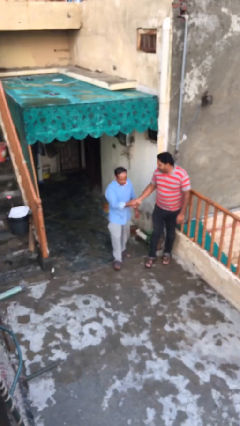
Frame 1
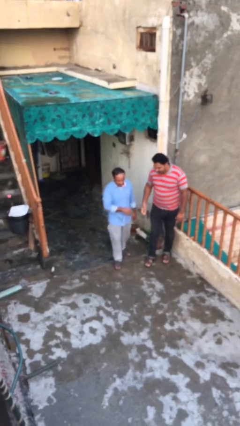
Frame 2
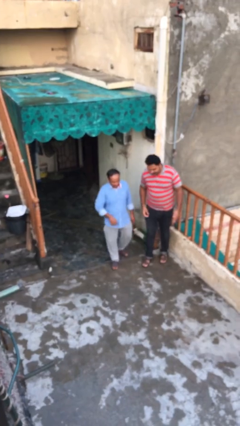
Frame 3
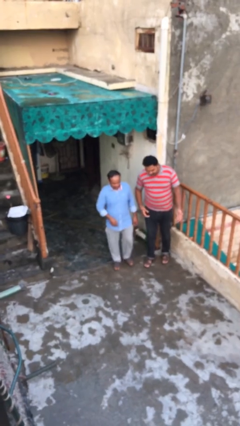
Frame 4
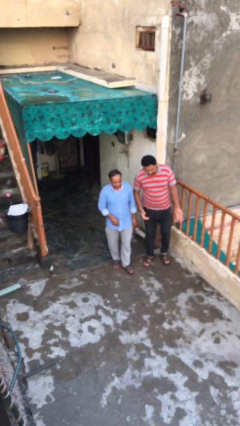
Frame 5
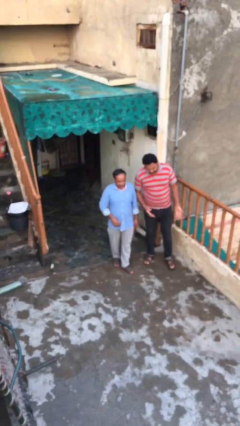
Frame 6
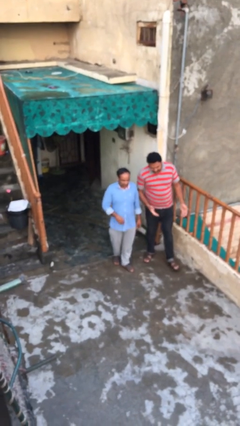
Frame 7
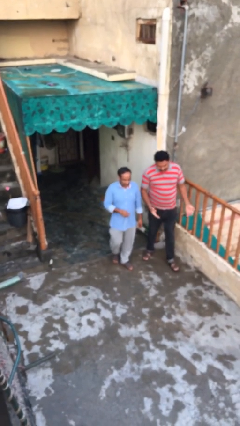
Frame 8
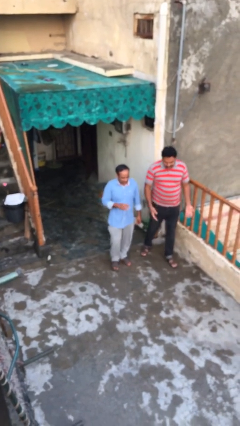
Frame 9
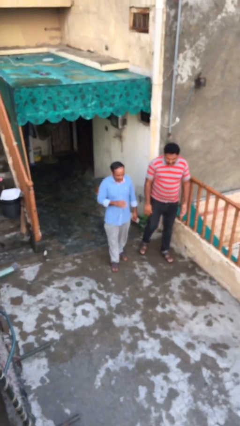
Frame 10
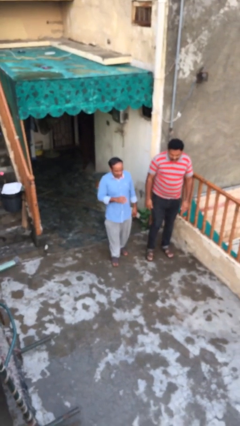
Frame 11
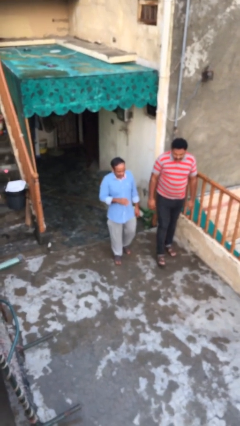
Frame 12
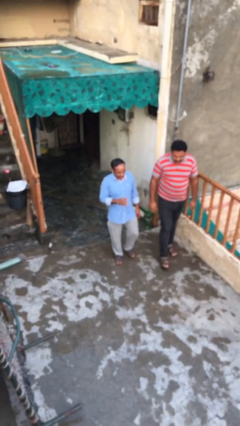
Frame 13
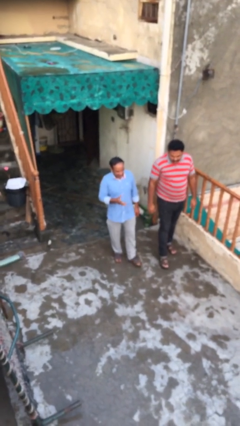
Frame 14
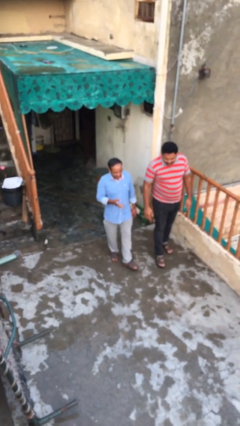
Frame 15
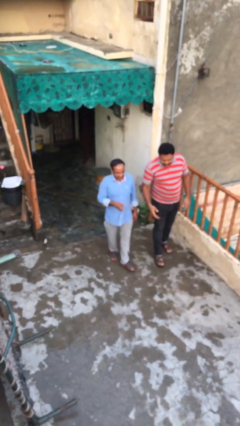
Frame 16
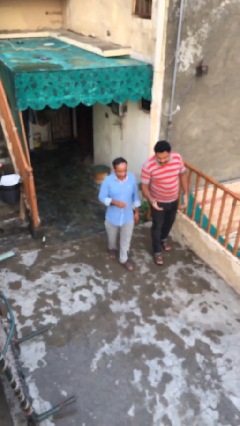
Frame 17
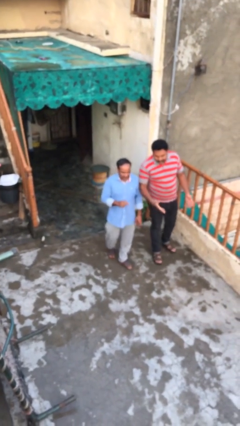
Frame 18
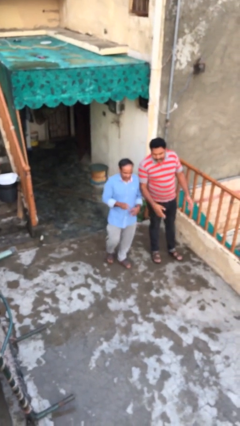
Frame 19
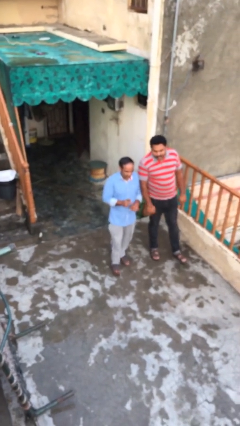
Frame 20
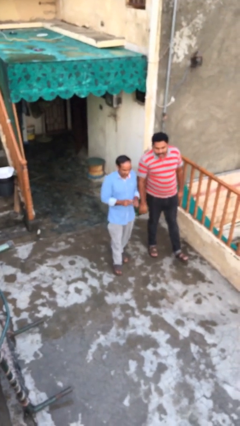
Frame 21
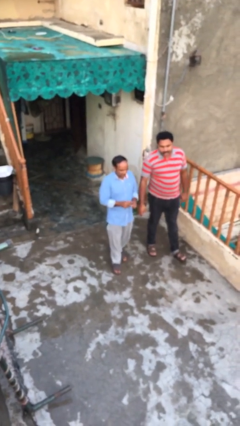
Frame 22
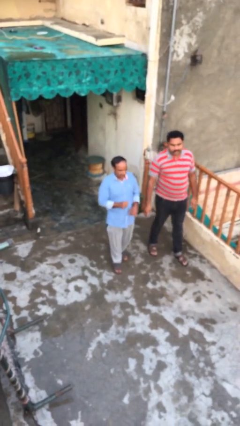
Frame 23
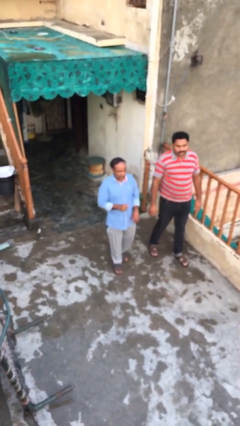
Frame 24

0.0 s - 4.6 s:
person talks to person

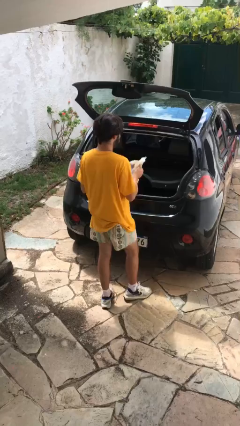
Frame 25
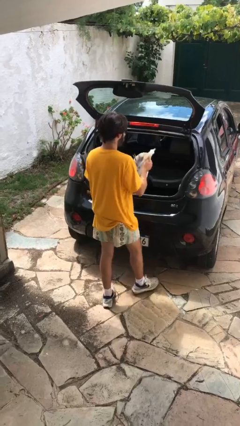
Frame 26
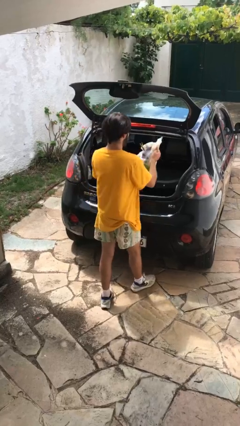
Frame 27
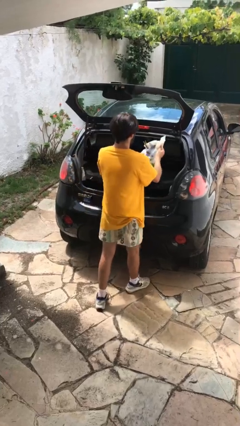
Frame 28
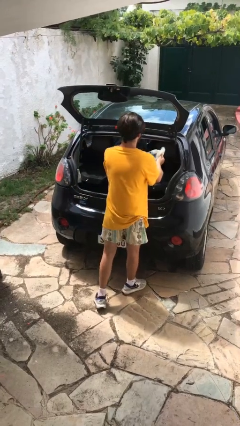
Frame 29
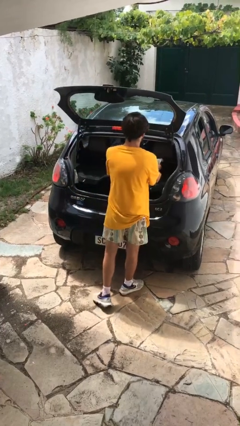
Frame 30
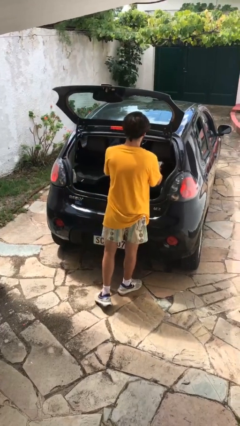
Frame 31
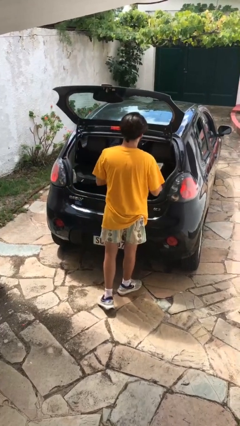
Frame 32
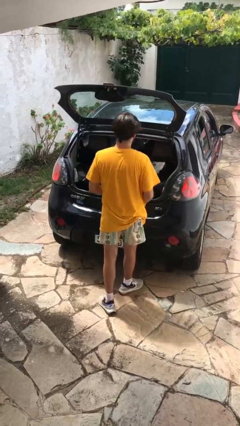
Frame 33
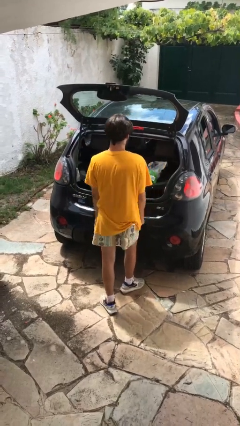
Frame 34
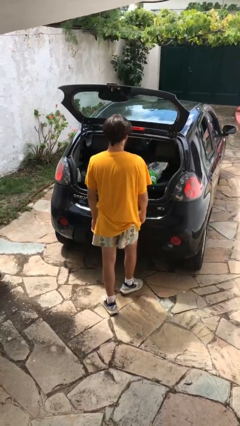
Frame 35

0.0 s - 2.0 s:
person loads car

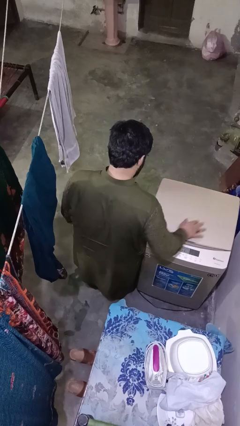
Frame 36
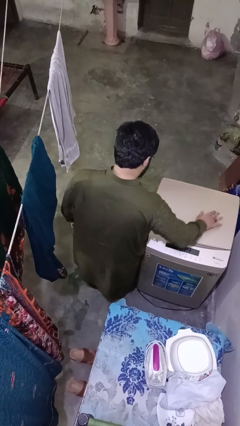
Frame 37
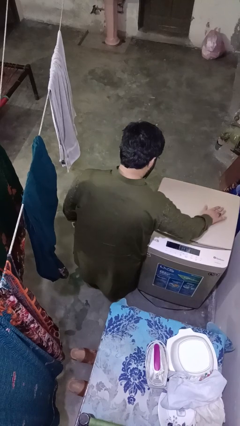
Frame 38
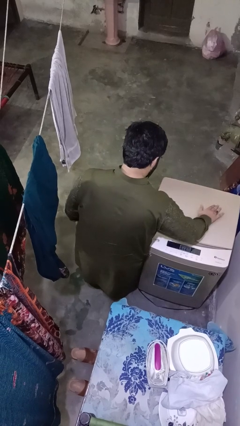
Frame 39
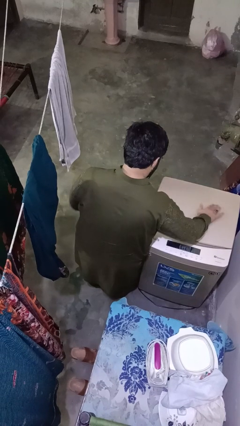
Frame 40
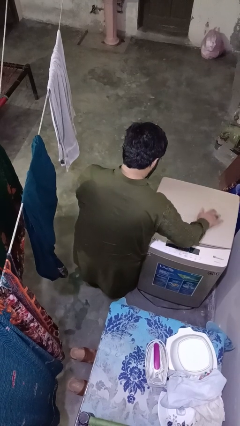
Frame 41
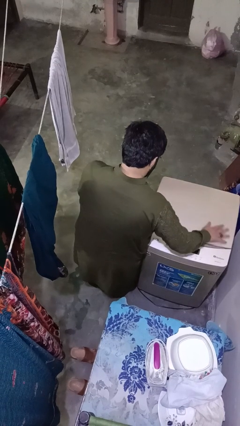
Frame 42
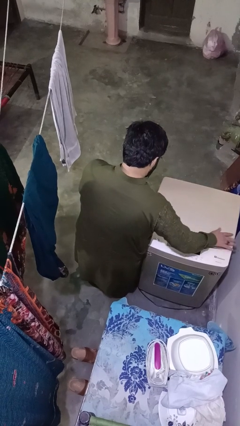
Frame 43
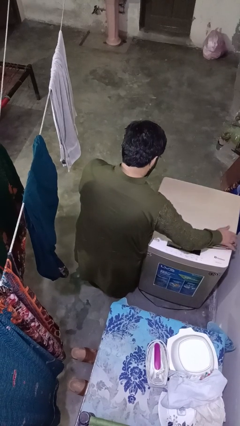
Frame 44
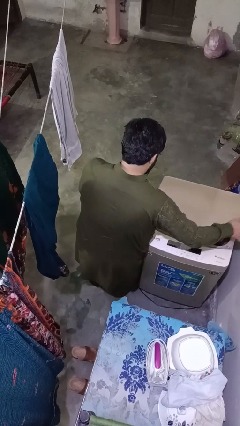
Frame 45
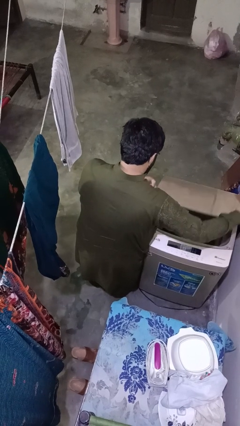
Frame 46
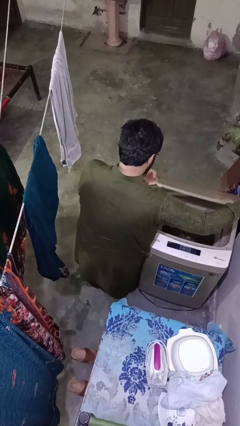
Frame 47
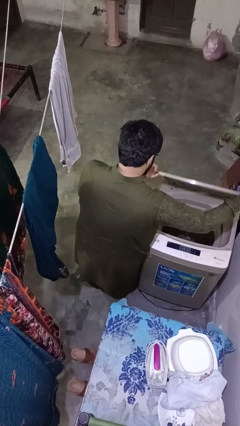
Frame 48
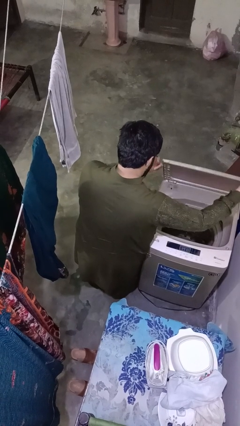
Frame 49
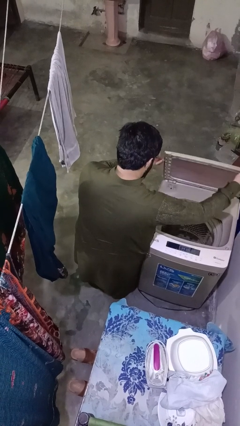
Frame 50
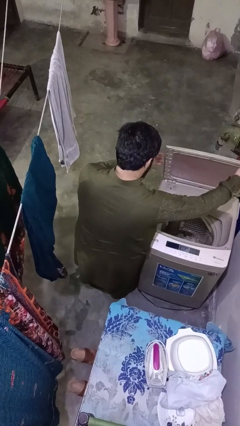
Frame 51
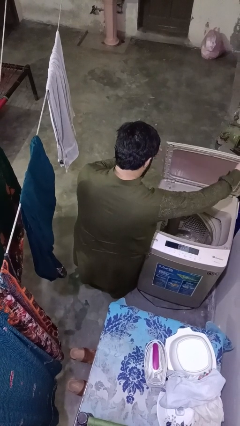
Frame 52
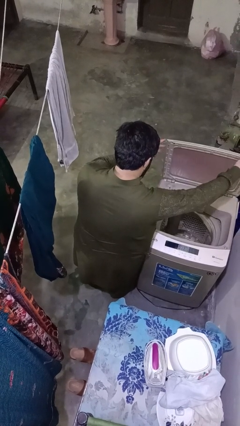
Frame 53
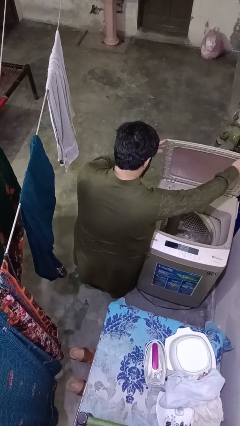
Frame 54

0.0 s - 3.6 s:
person opens clothes washer

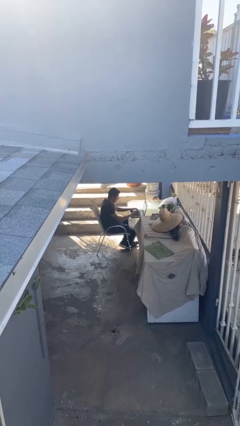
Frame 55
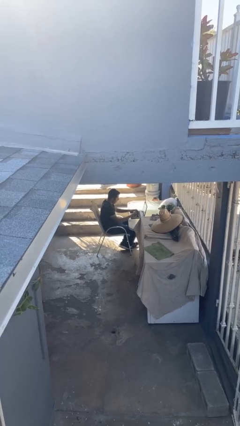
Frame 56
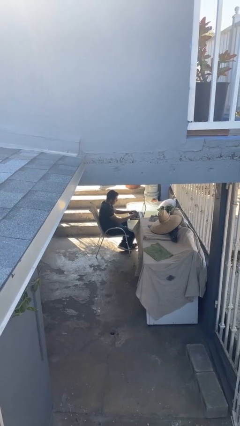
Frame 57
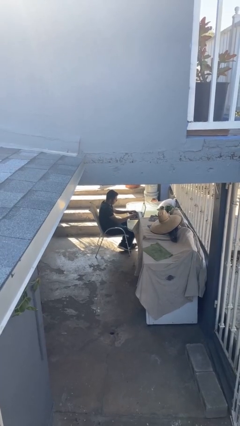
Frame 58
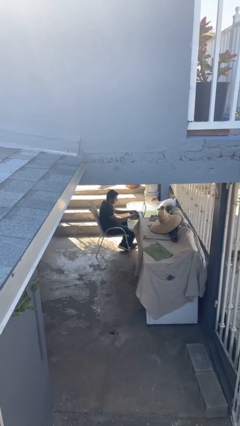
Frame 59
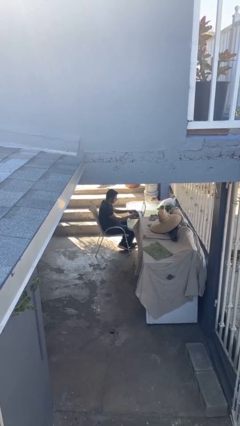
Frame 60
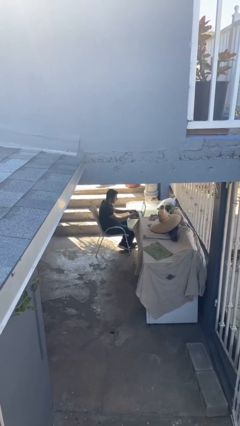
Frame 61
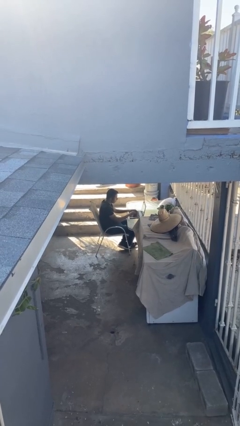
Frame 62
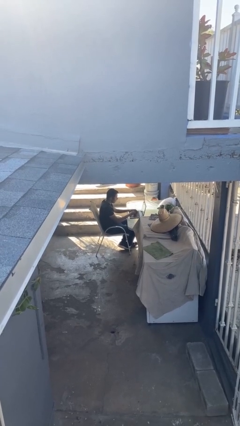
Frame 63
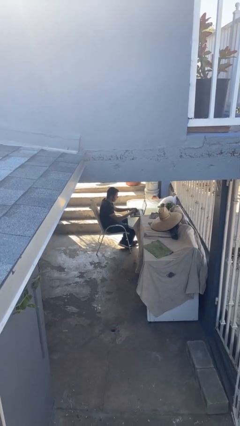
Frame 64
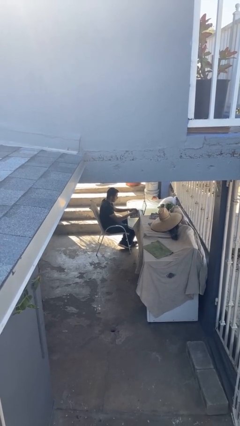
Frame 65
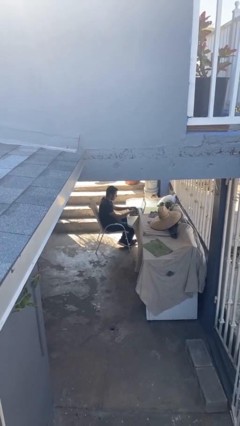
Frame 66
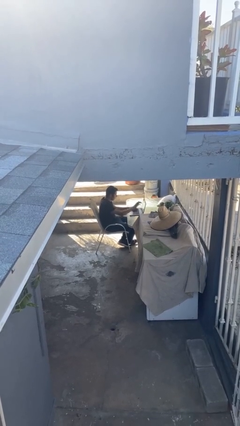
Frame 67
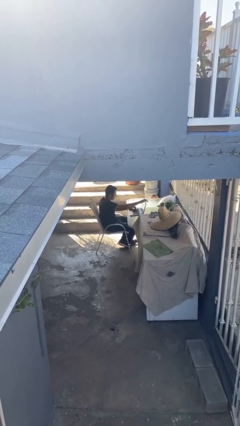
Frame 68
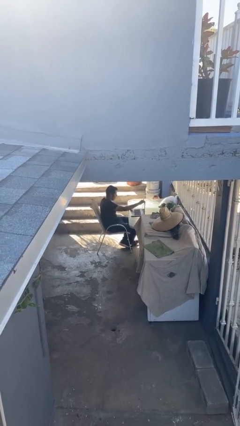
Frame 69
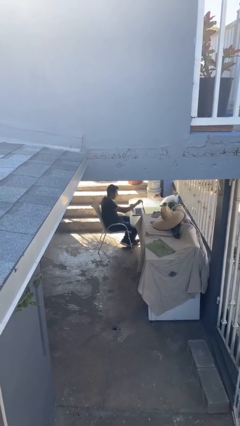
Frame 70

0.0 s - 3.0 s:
person interacts with laptop

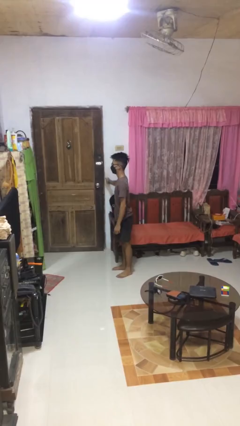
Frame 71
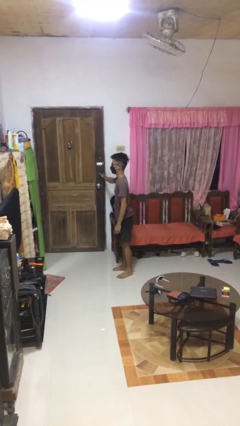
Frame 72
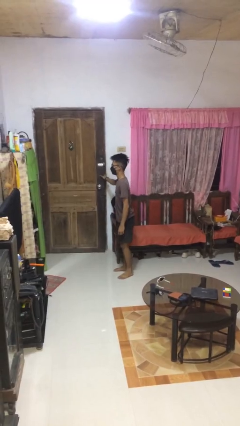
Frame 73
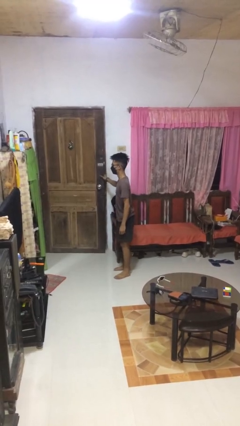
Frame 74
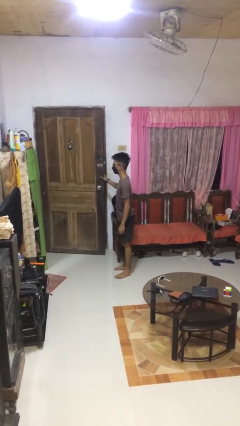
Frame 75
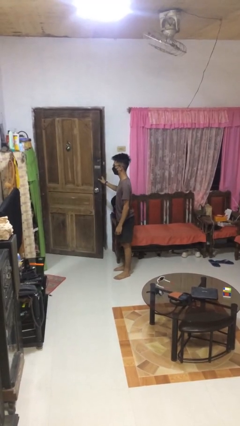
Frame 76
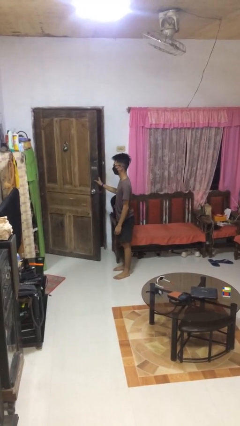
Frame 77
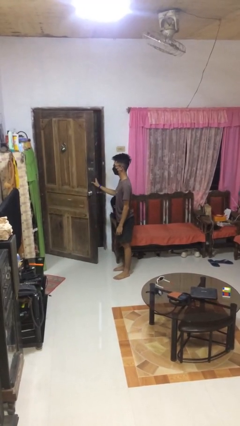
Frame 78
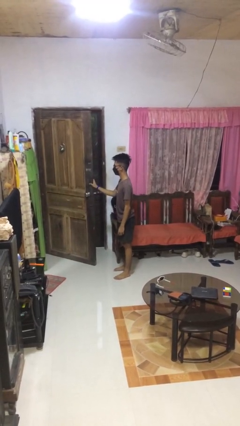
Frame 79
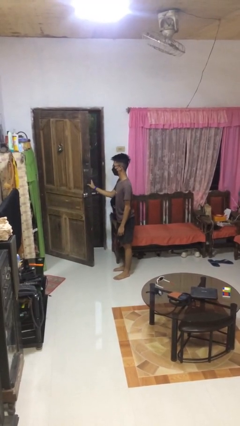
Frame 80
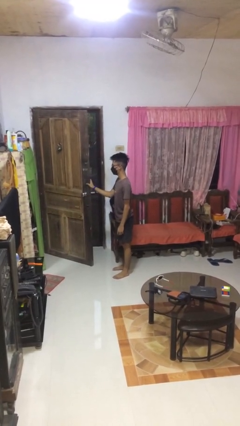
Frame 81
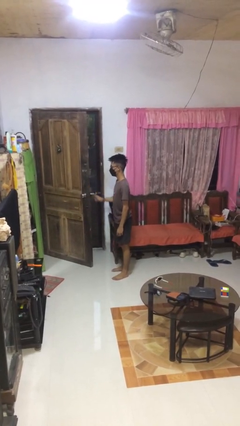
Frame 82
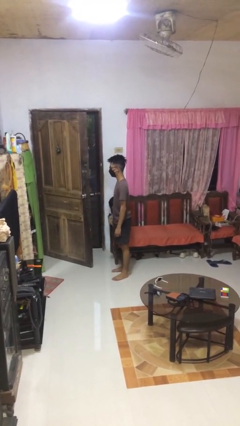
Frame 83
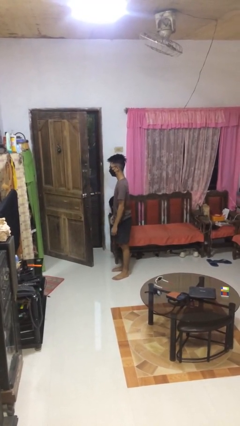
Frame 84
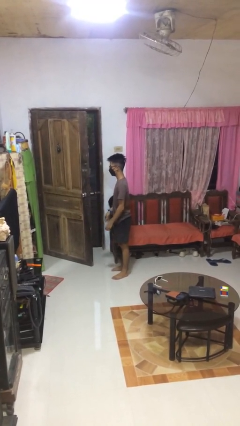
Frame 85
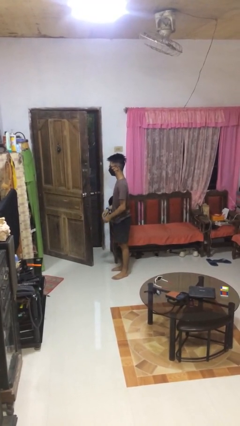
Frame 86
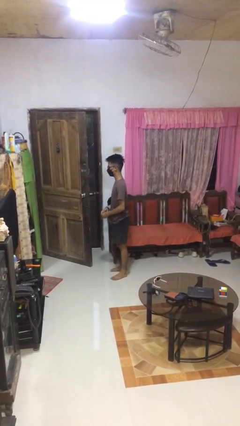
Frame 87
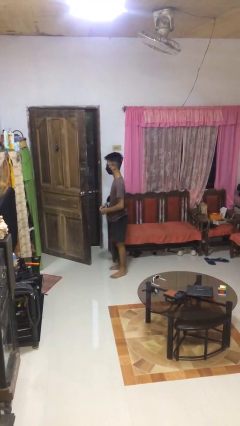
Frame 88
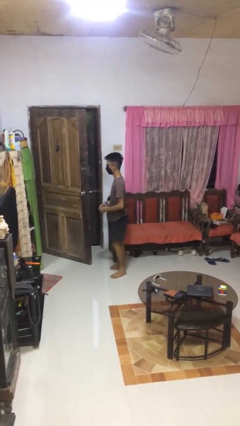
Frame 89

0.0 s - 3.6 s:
person opens facility door

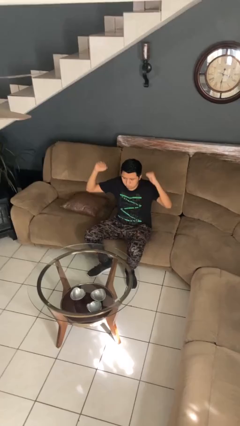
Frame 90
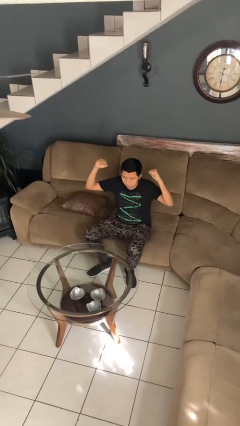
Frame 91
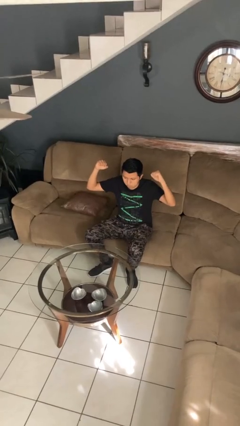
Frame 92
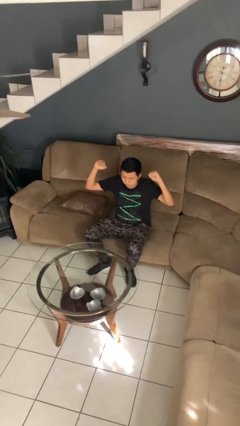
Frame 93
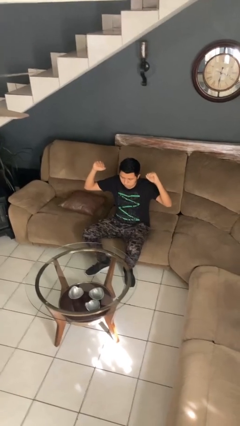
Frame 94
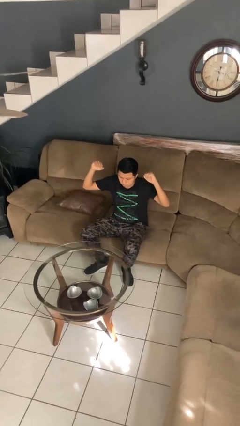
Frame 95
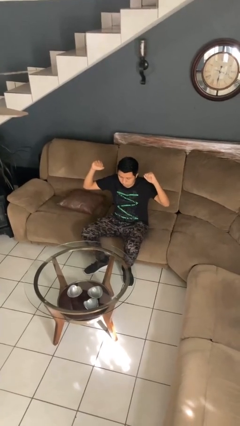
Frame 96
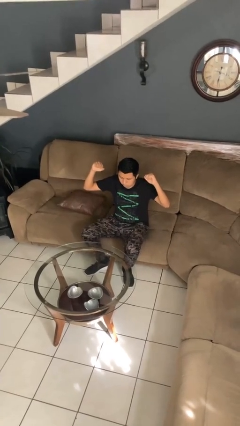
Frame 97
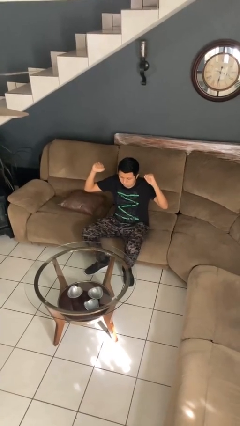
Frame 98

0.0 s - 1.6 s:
person gestures zoom in
